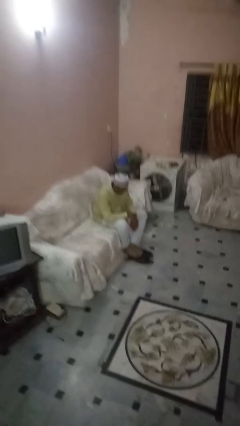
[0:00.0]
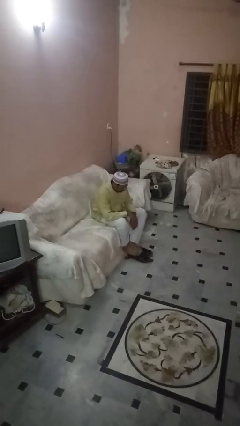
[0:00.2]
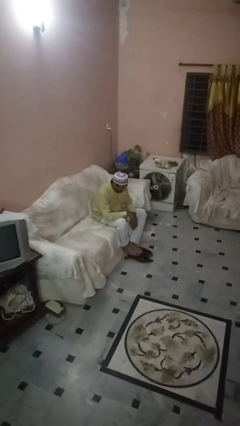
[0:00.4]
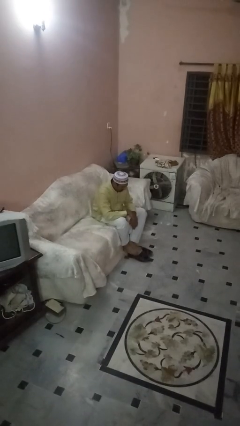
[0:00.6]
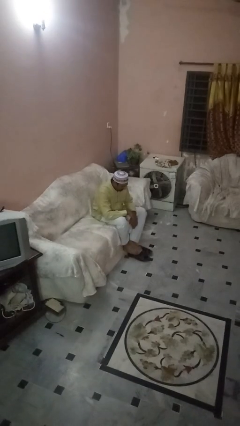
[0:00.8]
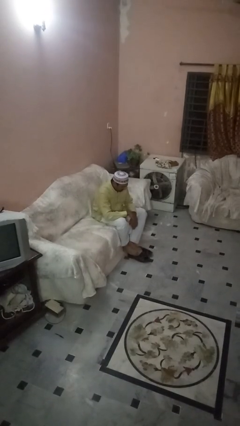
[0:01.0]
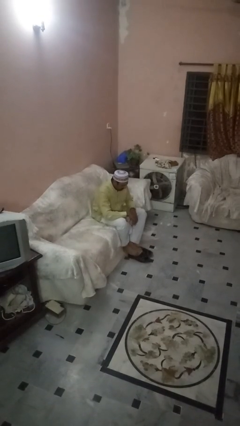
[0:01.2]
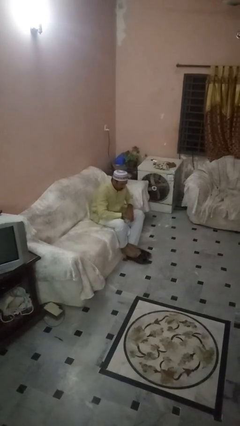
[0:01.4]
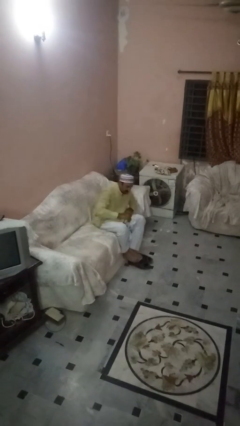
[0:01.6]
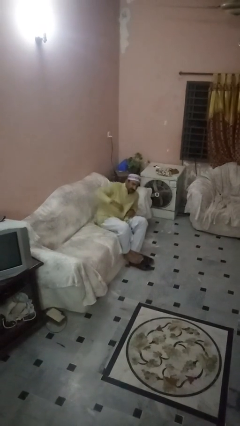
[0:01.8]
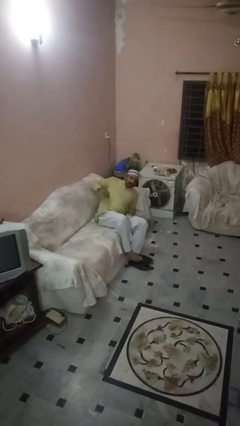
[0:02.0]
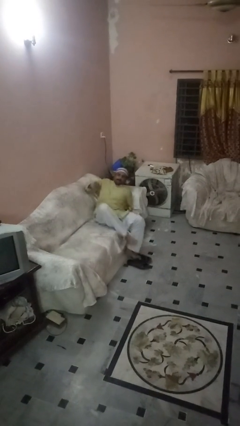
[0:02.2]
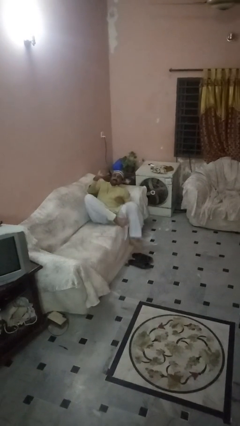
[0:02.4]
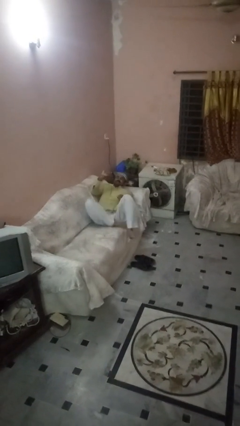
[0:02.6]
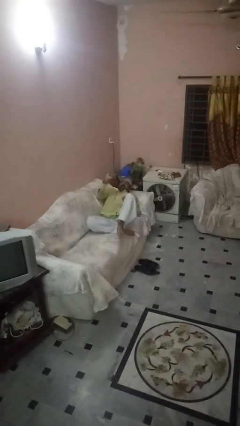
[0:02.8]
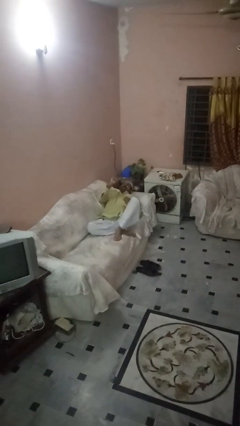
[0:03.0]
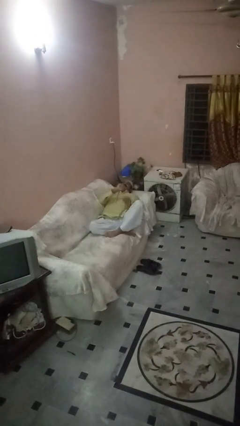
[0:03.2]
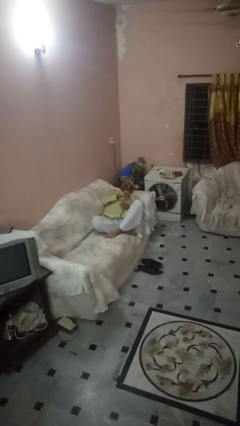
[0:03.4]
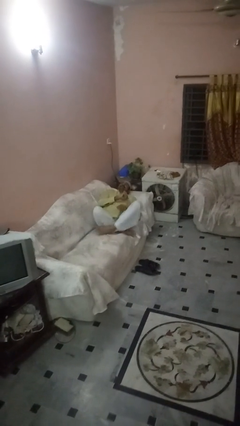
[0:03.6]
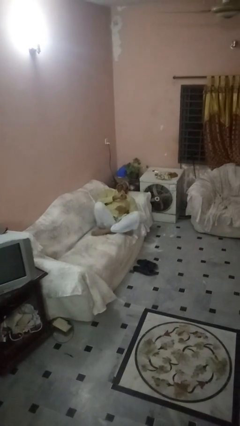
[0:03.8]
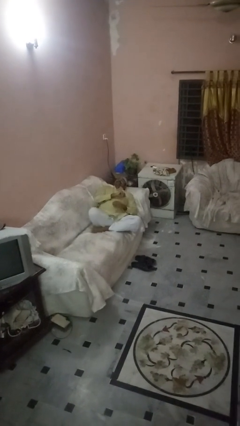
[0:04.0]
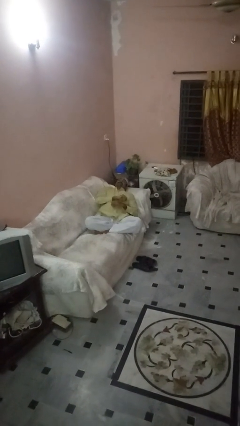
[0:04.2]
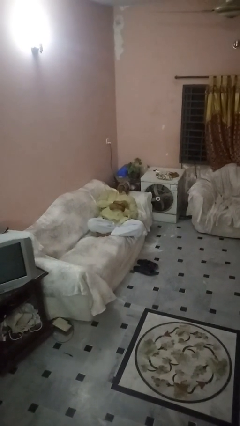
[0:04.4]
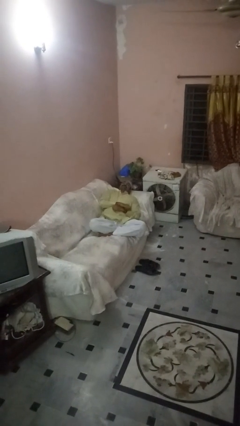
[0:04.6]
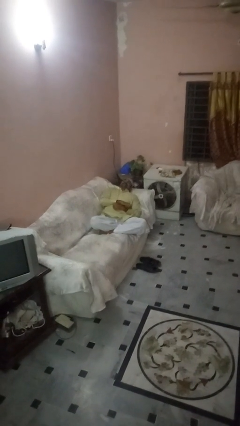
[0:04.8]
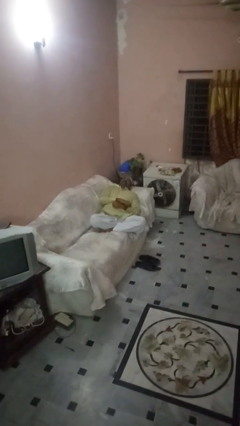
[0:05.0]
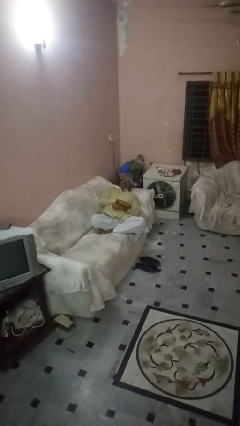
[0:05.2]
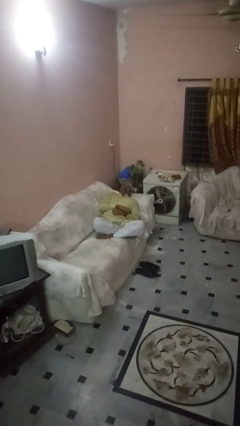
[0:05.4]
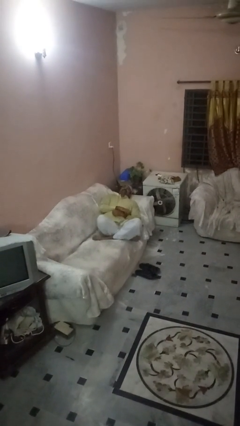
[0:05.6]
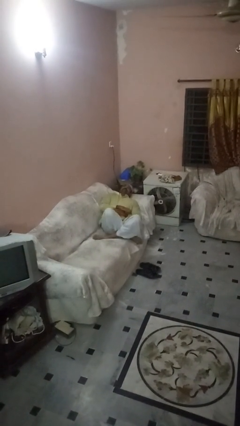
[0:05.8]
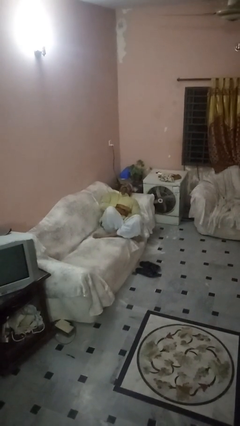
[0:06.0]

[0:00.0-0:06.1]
person lies down on couch

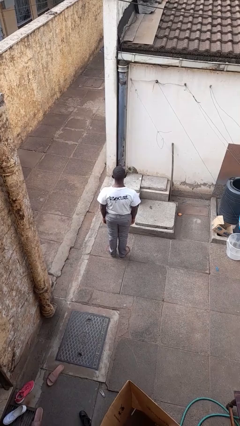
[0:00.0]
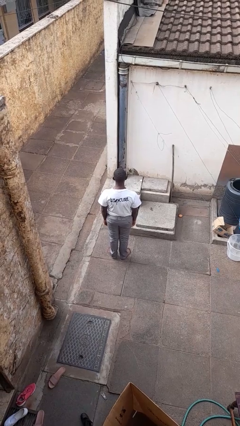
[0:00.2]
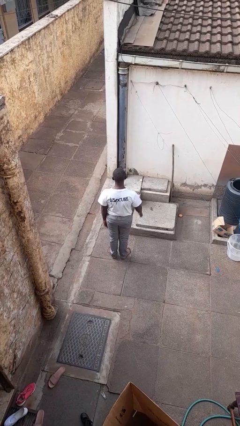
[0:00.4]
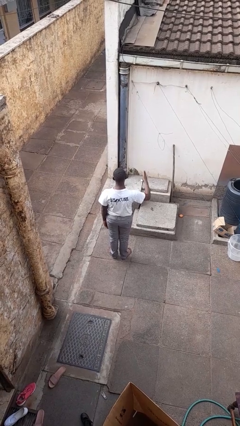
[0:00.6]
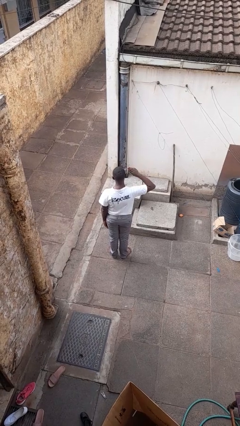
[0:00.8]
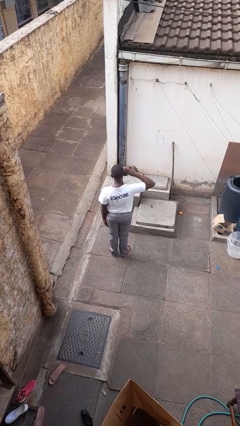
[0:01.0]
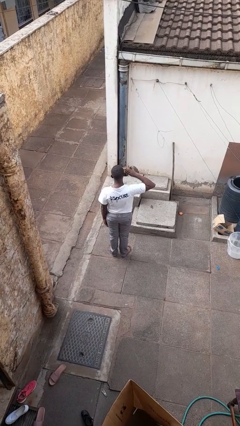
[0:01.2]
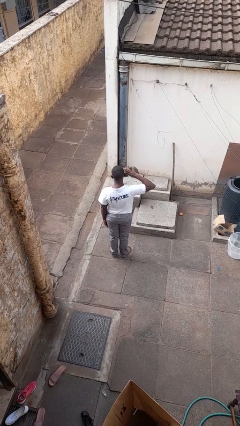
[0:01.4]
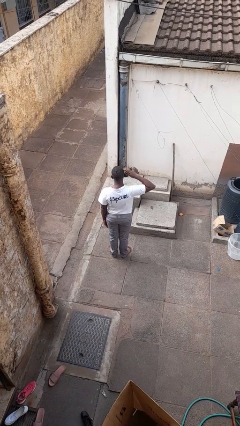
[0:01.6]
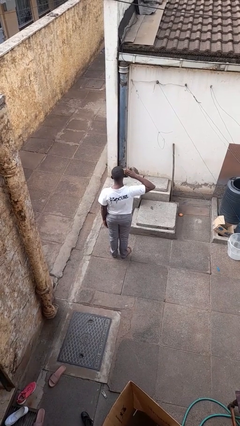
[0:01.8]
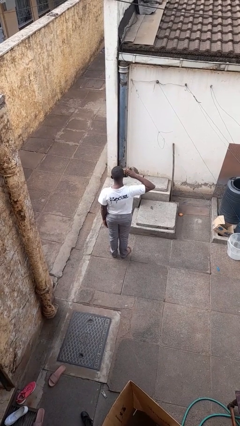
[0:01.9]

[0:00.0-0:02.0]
person salutes

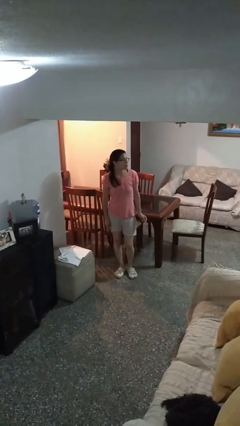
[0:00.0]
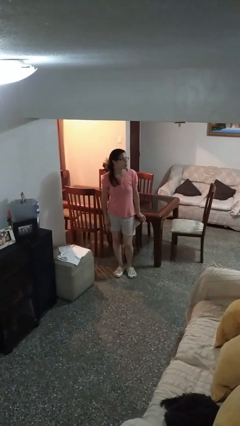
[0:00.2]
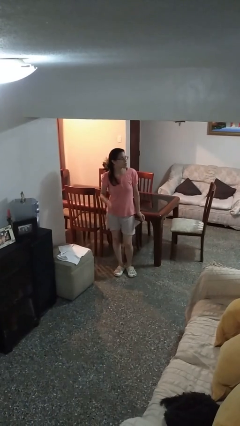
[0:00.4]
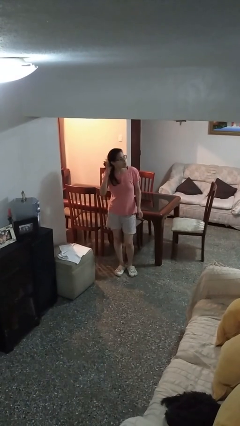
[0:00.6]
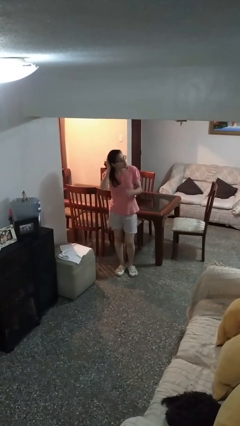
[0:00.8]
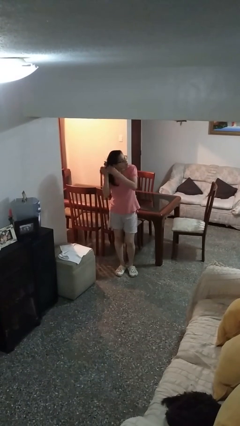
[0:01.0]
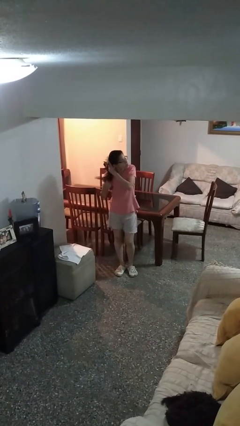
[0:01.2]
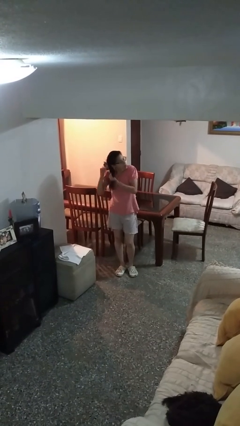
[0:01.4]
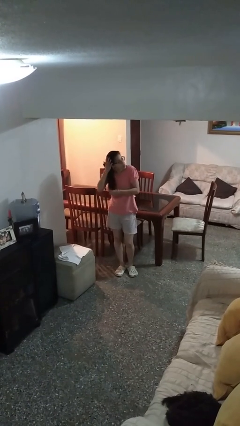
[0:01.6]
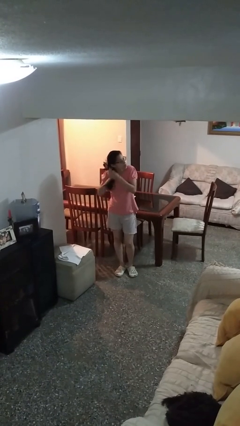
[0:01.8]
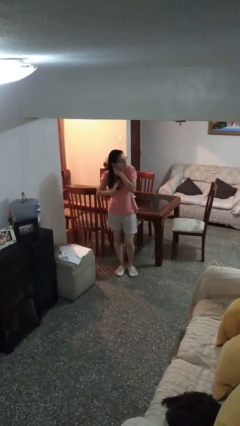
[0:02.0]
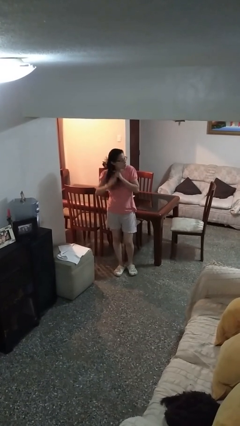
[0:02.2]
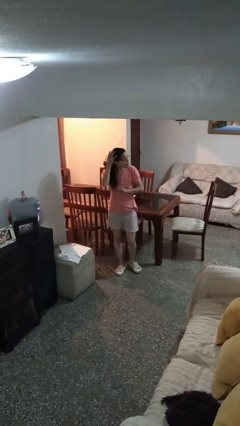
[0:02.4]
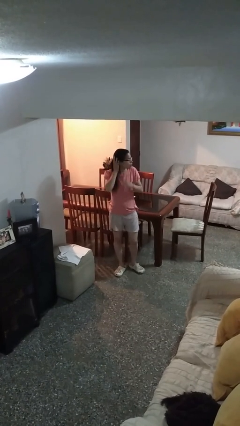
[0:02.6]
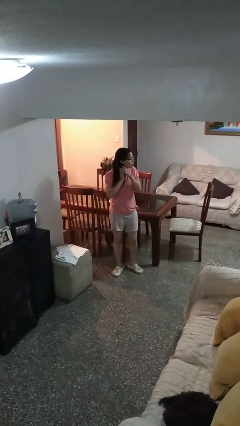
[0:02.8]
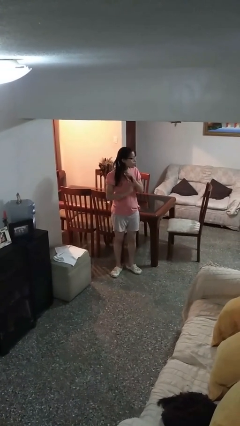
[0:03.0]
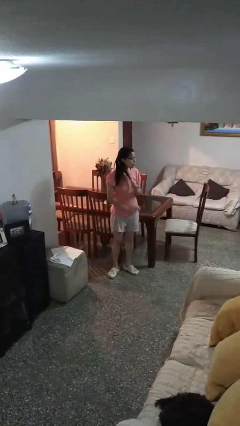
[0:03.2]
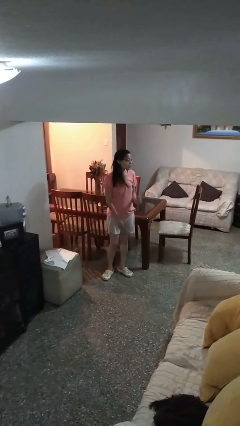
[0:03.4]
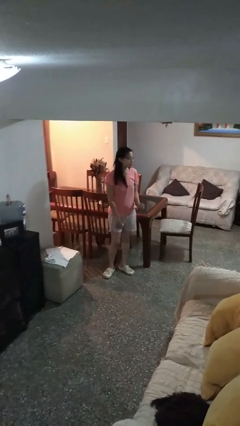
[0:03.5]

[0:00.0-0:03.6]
person strokes hair

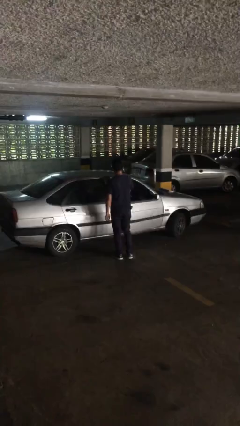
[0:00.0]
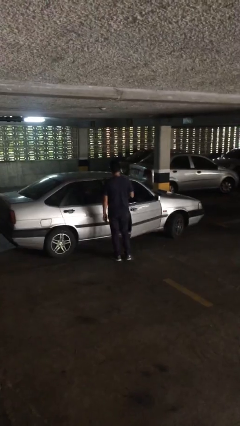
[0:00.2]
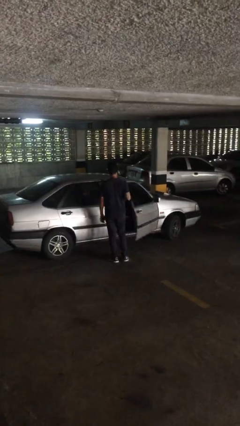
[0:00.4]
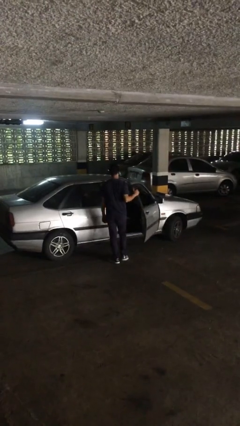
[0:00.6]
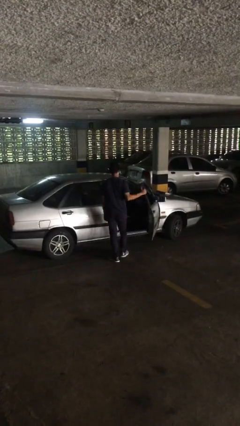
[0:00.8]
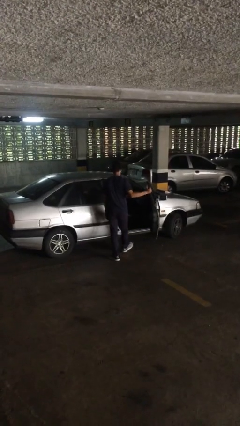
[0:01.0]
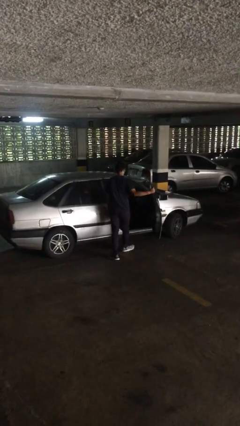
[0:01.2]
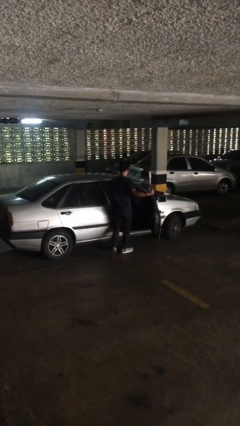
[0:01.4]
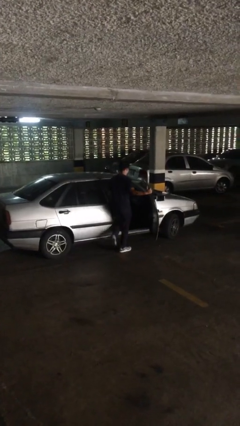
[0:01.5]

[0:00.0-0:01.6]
person opens car door

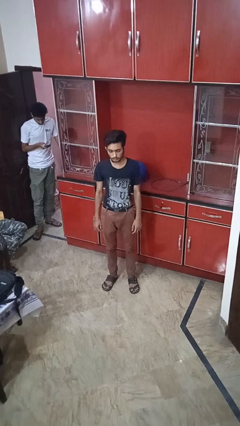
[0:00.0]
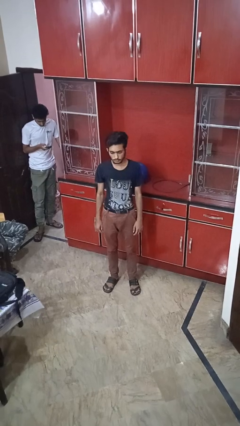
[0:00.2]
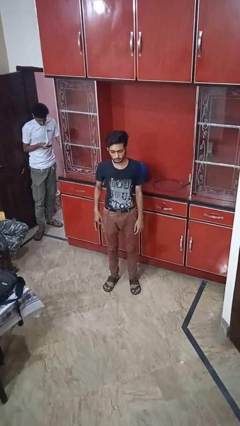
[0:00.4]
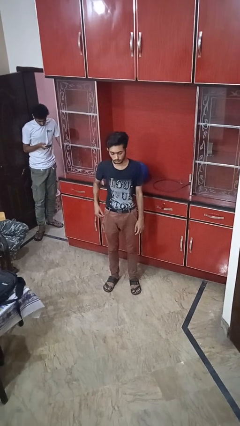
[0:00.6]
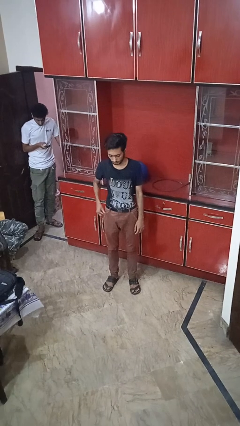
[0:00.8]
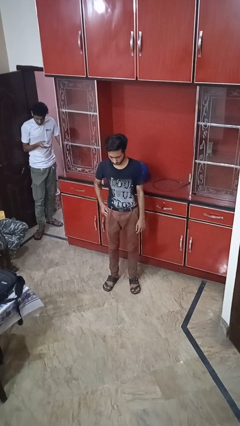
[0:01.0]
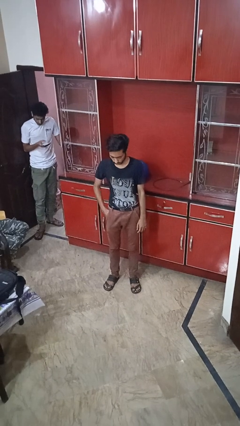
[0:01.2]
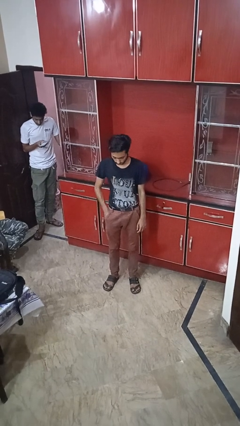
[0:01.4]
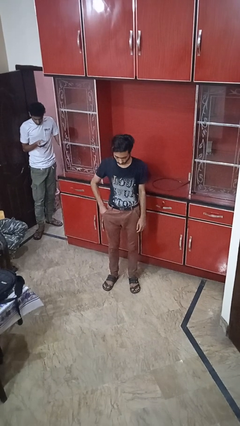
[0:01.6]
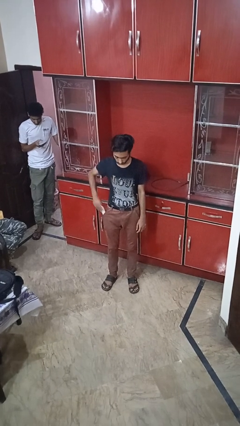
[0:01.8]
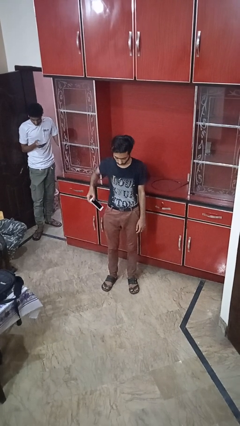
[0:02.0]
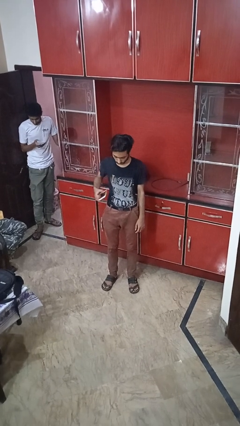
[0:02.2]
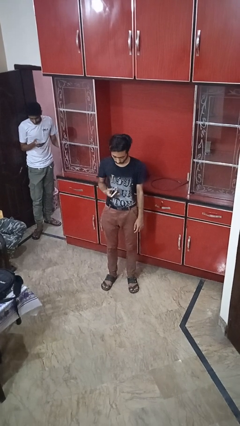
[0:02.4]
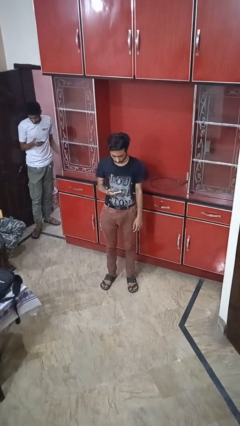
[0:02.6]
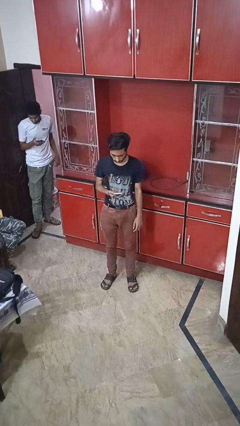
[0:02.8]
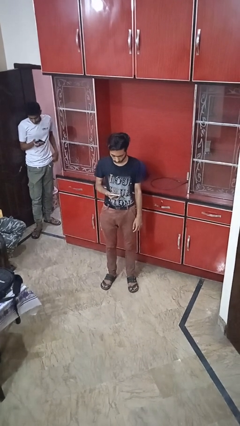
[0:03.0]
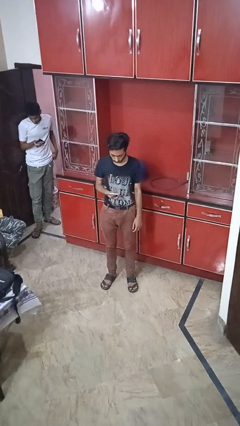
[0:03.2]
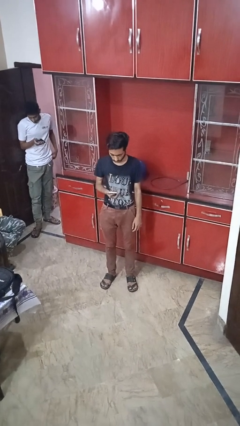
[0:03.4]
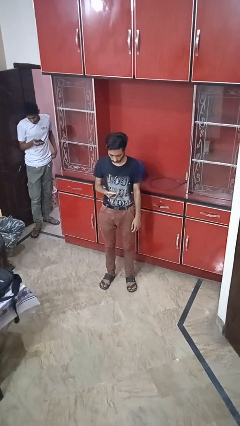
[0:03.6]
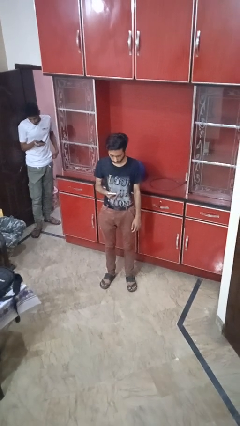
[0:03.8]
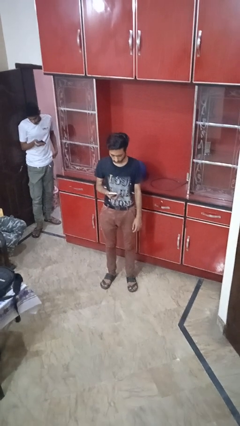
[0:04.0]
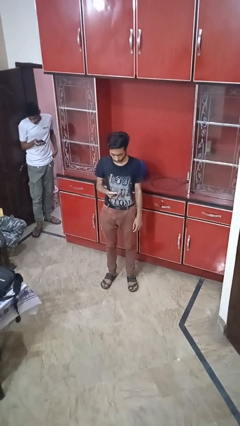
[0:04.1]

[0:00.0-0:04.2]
person takes phone from pocket

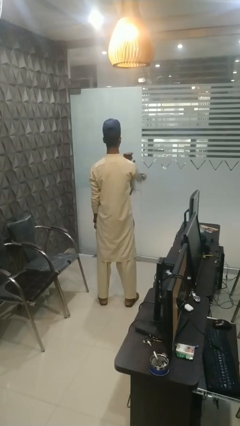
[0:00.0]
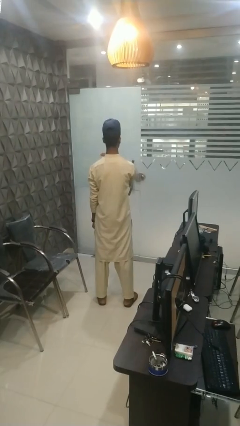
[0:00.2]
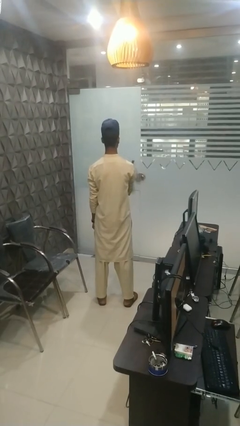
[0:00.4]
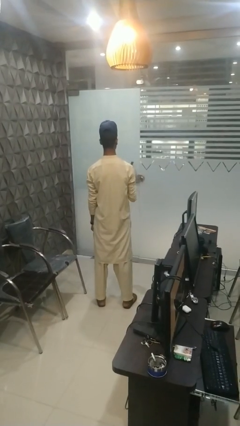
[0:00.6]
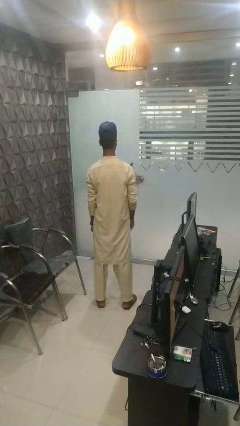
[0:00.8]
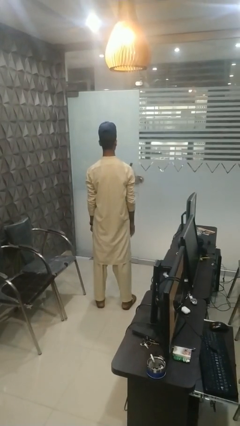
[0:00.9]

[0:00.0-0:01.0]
person gestures cut
